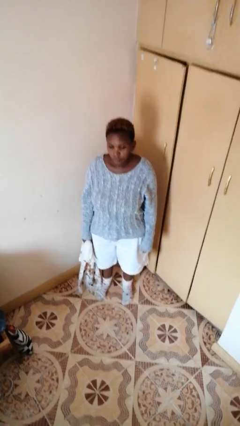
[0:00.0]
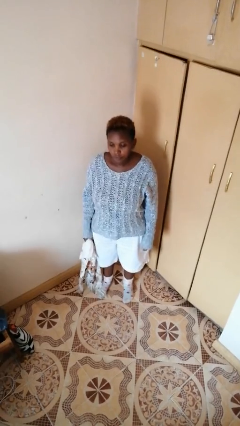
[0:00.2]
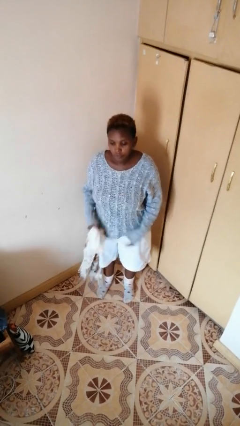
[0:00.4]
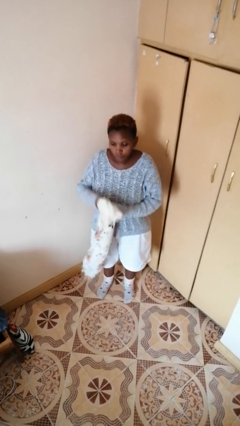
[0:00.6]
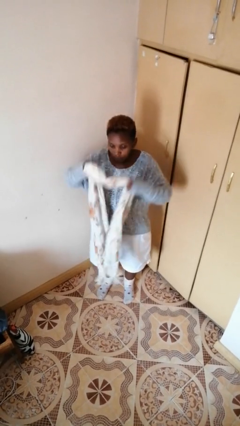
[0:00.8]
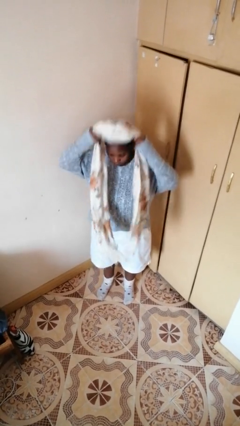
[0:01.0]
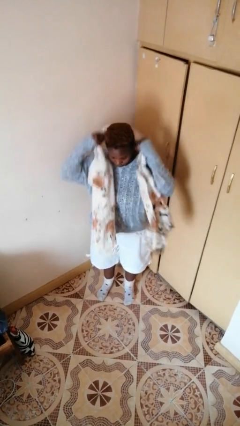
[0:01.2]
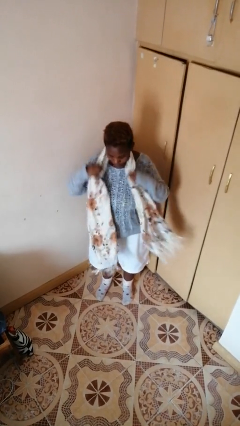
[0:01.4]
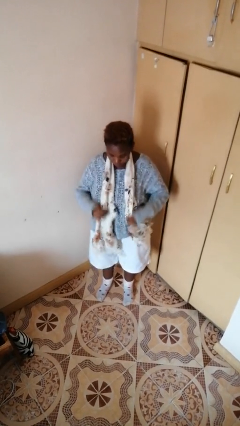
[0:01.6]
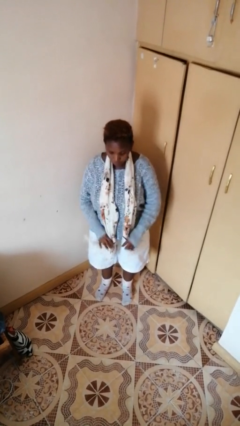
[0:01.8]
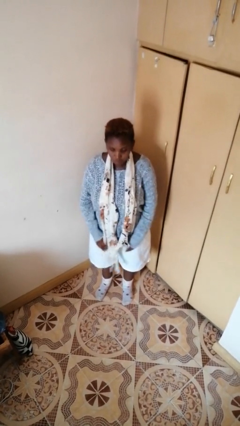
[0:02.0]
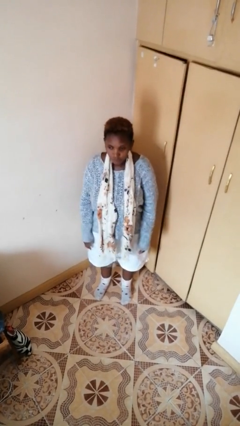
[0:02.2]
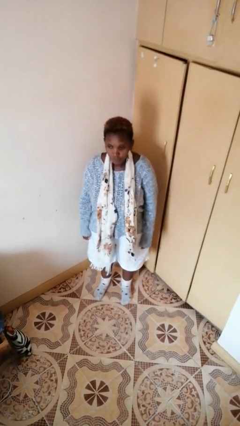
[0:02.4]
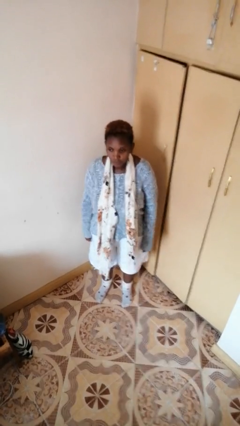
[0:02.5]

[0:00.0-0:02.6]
person puts on scarf

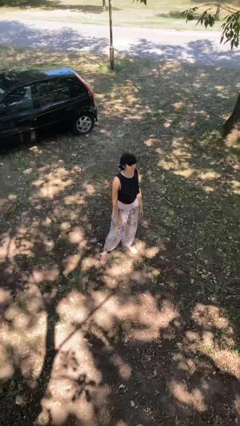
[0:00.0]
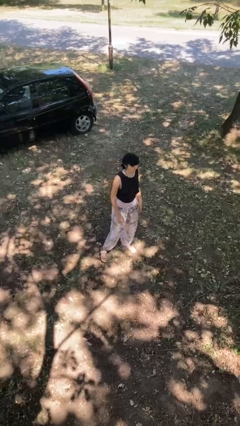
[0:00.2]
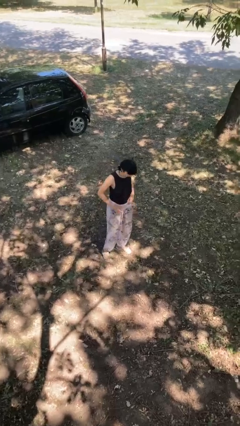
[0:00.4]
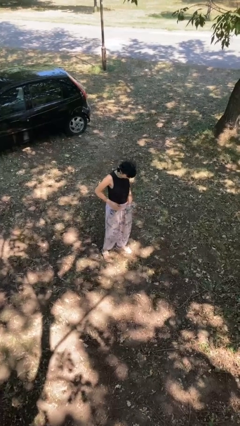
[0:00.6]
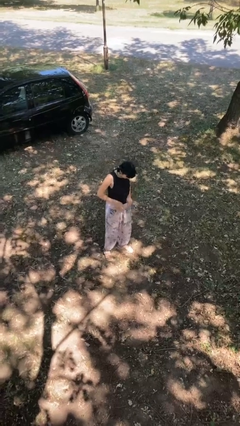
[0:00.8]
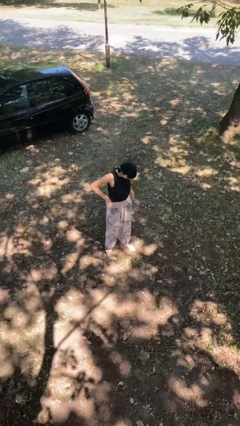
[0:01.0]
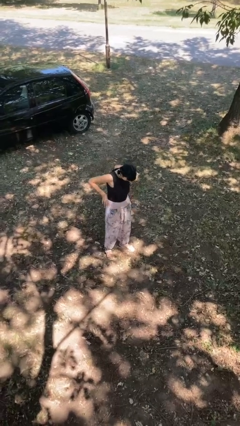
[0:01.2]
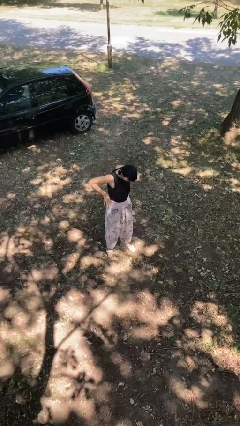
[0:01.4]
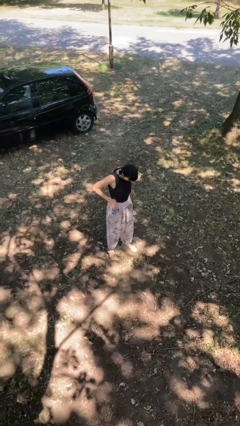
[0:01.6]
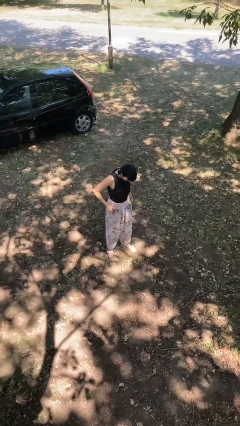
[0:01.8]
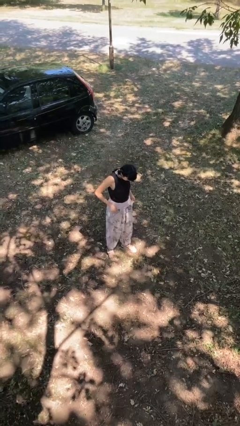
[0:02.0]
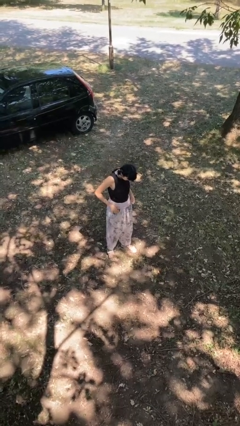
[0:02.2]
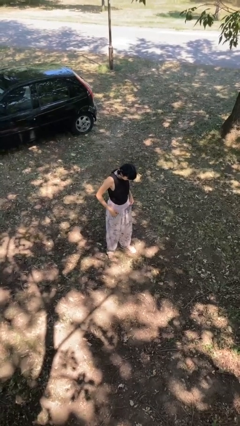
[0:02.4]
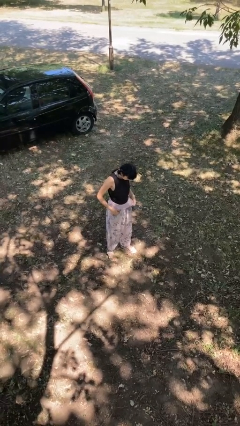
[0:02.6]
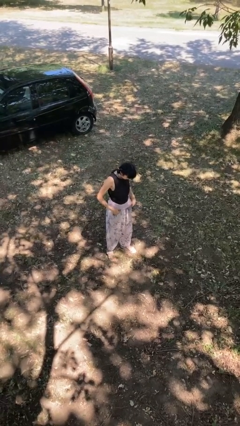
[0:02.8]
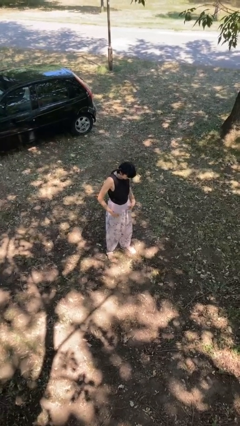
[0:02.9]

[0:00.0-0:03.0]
person hikes up pants

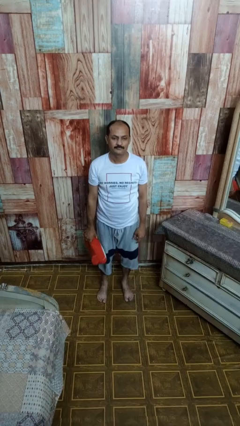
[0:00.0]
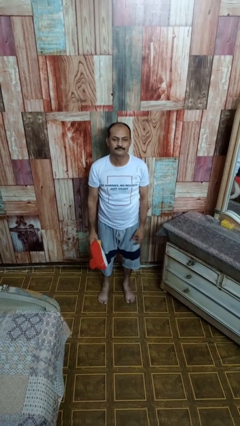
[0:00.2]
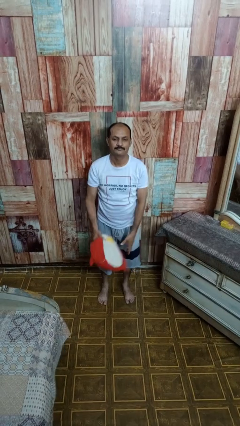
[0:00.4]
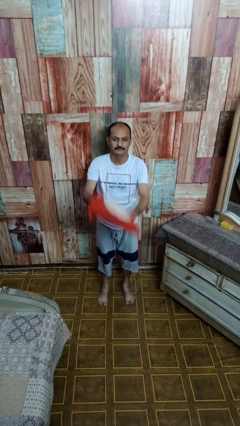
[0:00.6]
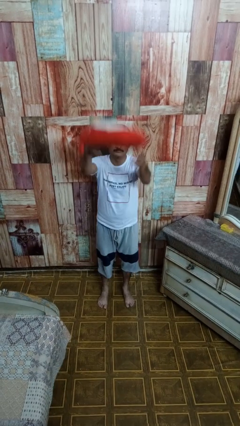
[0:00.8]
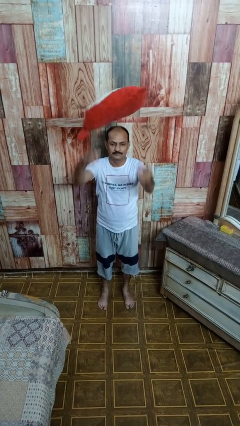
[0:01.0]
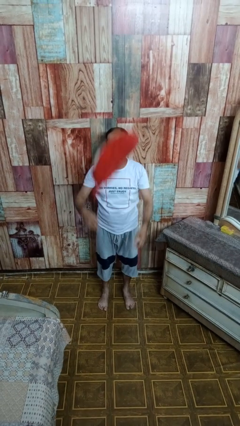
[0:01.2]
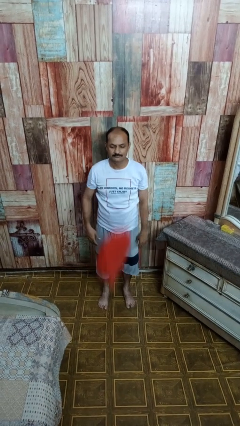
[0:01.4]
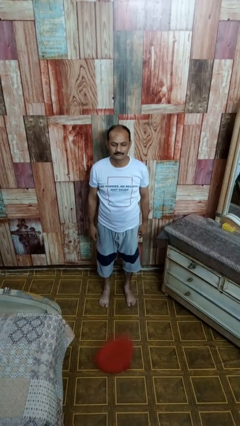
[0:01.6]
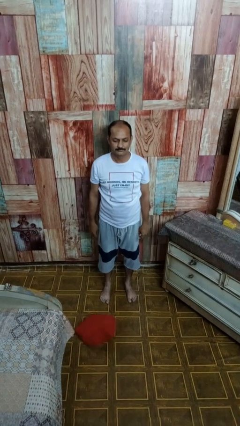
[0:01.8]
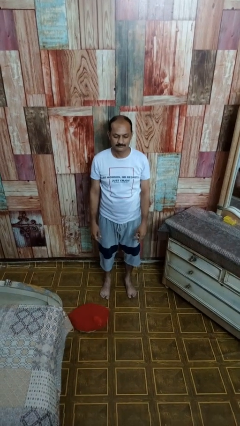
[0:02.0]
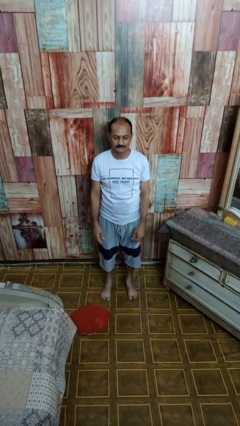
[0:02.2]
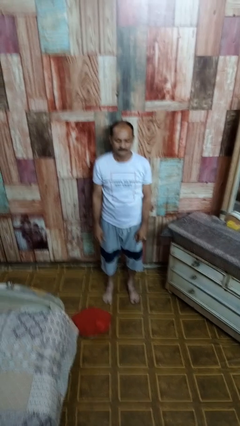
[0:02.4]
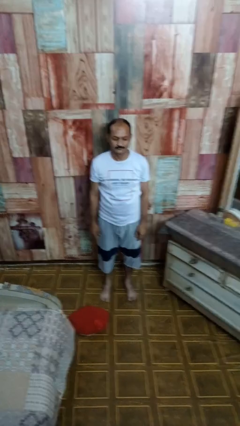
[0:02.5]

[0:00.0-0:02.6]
person throws object into air

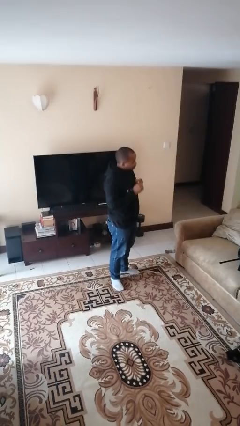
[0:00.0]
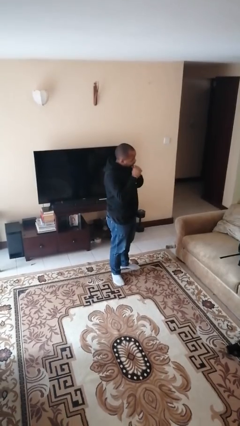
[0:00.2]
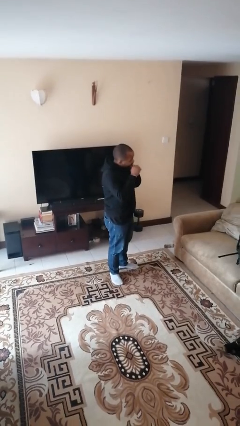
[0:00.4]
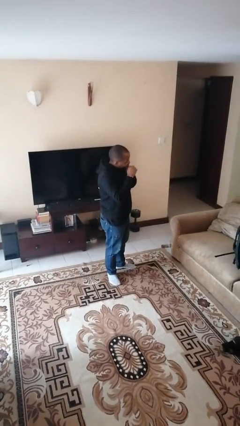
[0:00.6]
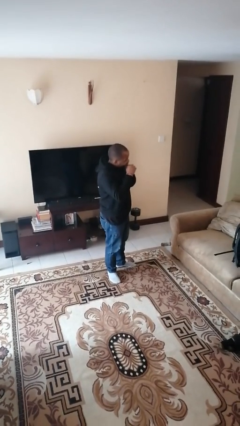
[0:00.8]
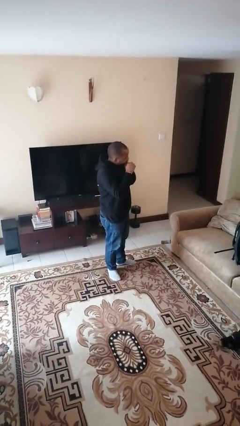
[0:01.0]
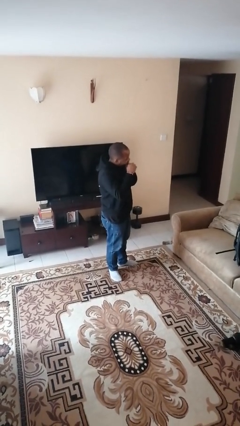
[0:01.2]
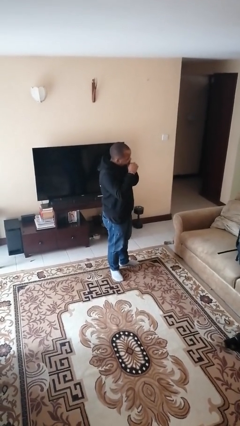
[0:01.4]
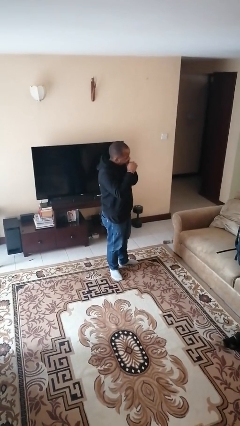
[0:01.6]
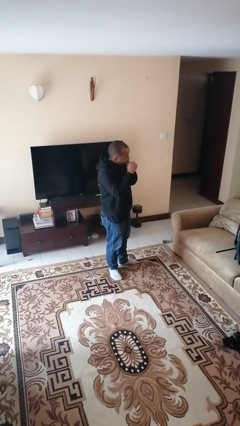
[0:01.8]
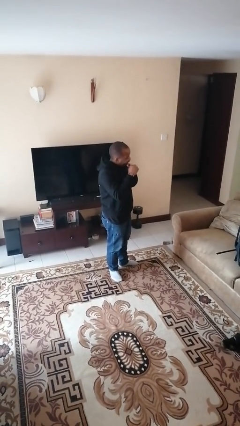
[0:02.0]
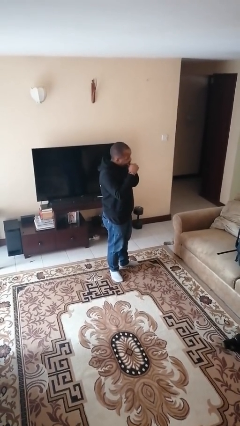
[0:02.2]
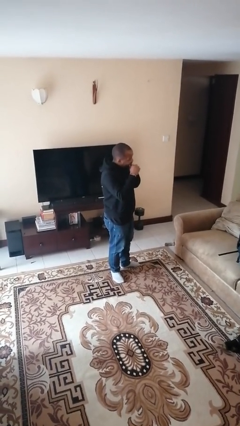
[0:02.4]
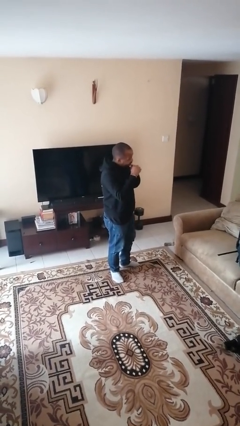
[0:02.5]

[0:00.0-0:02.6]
person flosses

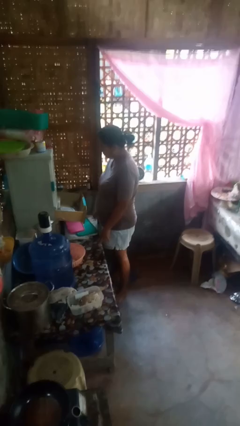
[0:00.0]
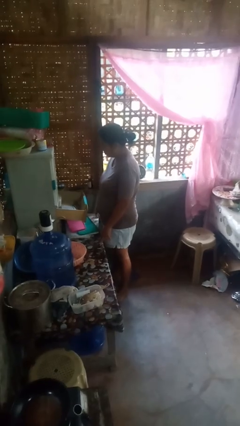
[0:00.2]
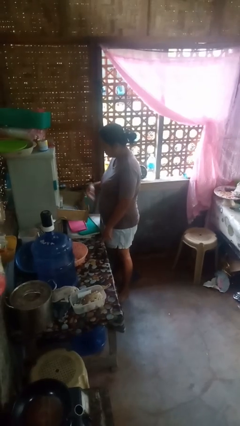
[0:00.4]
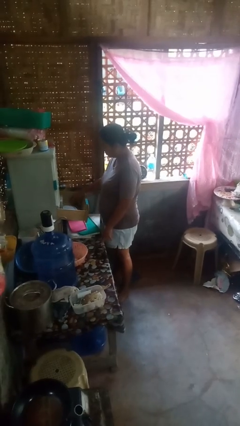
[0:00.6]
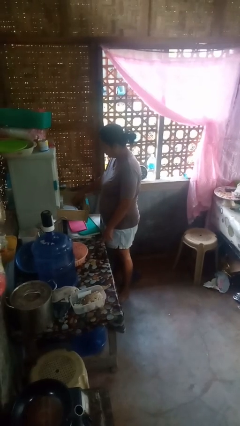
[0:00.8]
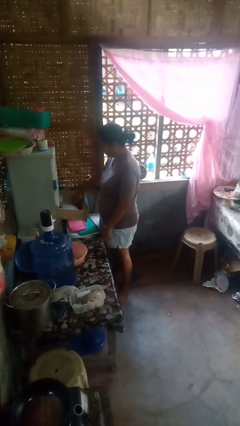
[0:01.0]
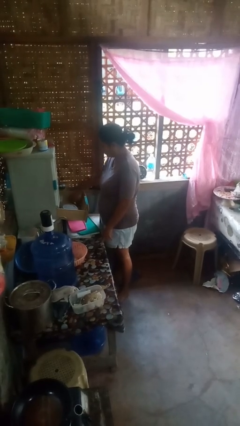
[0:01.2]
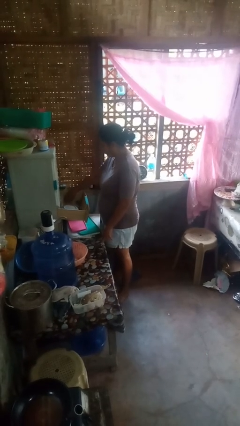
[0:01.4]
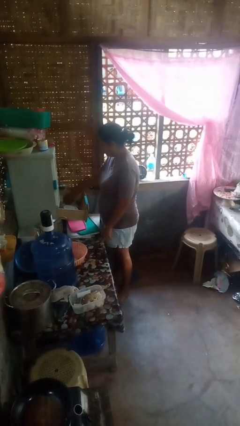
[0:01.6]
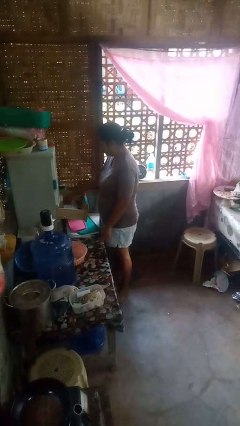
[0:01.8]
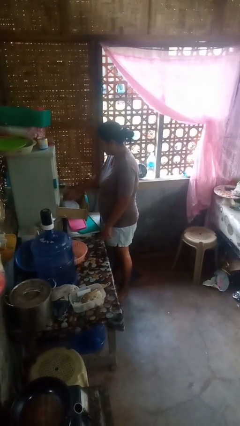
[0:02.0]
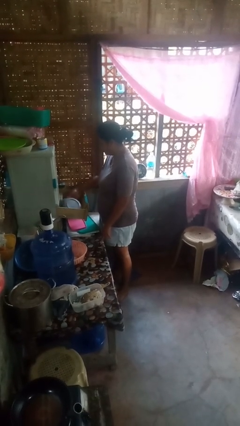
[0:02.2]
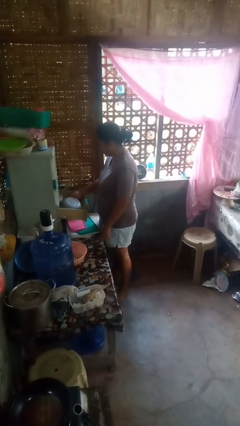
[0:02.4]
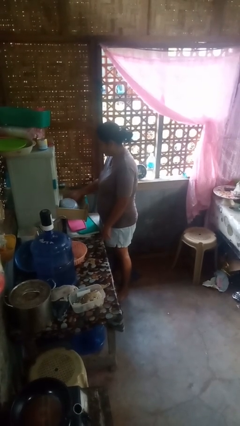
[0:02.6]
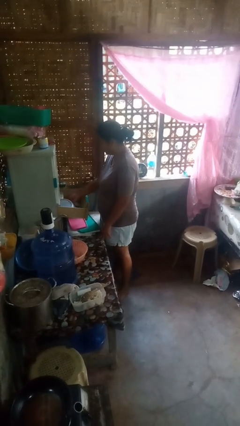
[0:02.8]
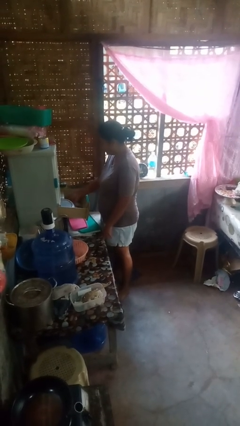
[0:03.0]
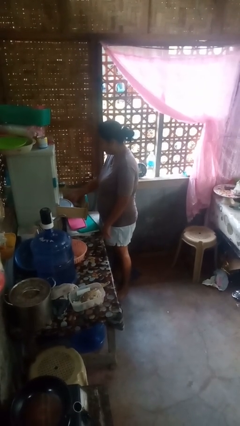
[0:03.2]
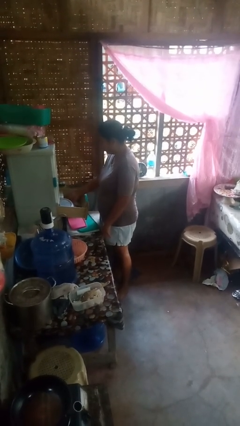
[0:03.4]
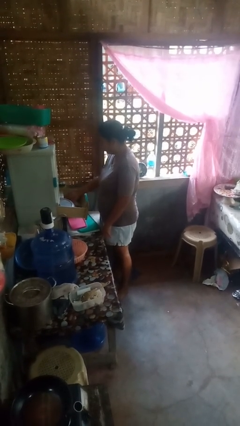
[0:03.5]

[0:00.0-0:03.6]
person searches in kitchen drawer

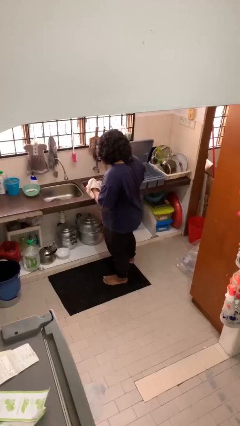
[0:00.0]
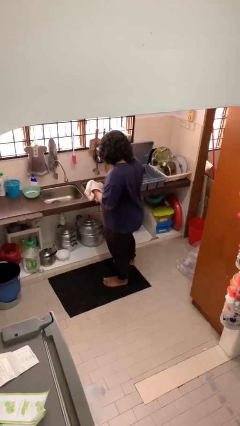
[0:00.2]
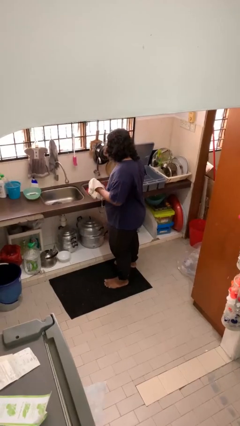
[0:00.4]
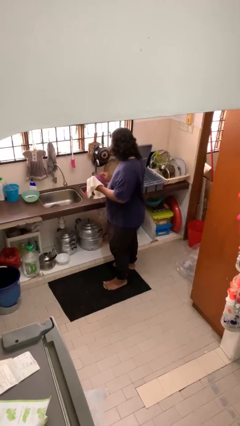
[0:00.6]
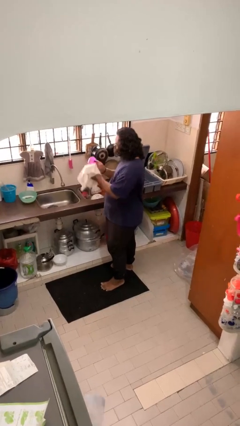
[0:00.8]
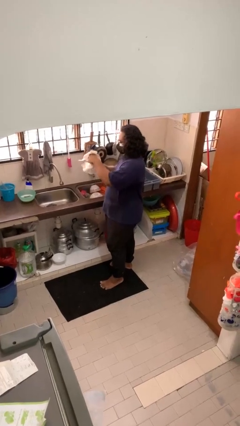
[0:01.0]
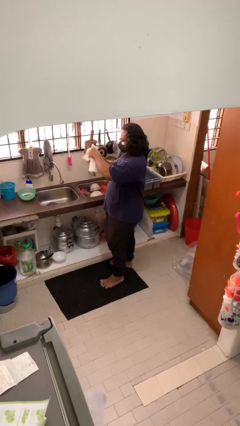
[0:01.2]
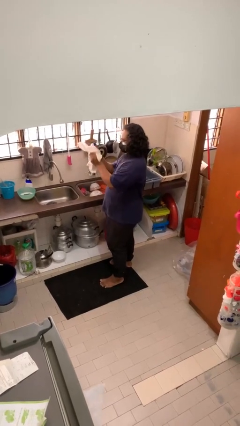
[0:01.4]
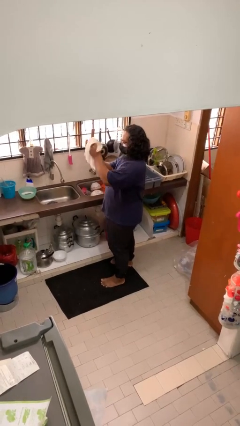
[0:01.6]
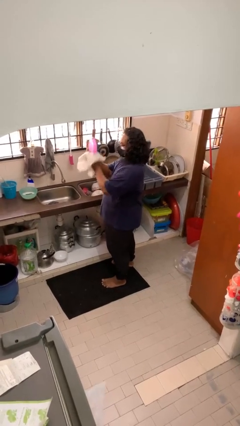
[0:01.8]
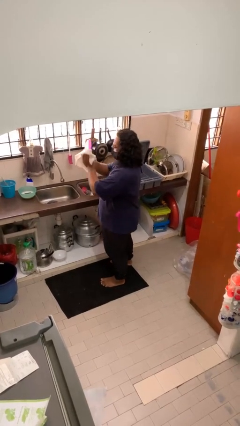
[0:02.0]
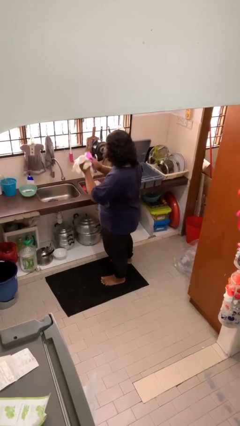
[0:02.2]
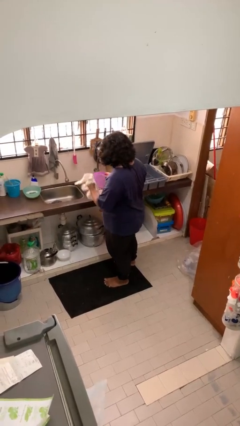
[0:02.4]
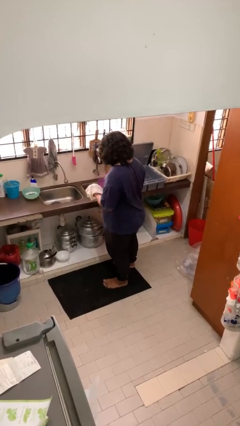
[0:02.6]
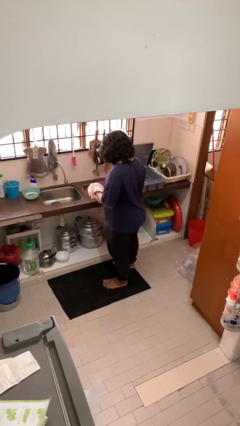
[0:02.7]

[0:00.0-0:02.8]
person dries dish
